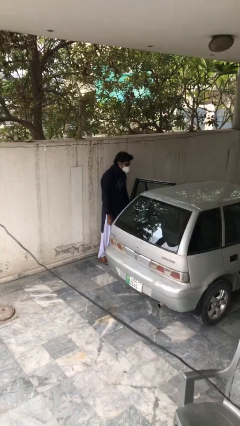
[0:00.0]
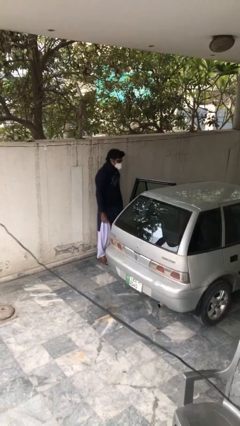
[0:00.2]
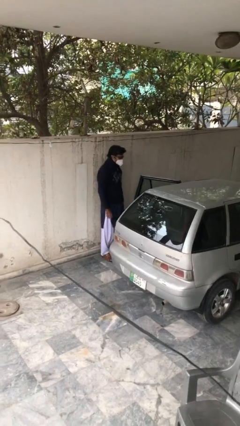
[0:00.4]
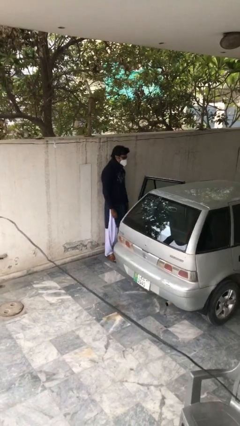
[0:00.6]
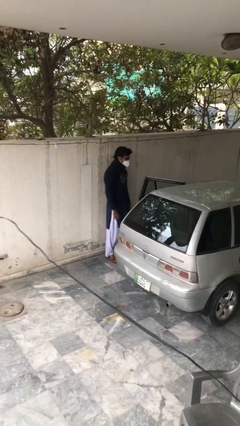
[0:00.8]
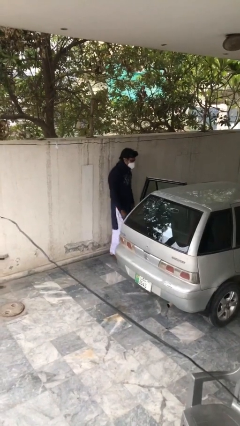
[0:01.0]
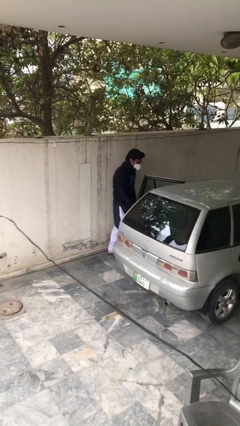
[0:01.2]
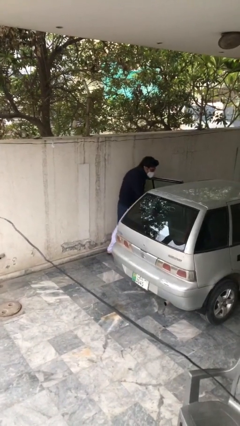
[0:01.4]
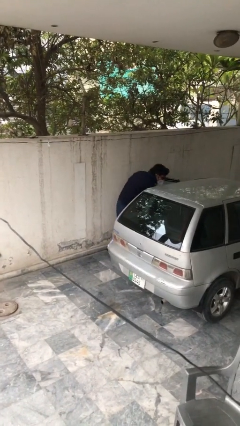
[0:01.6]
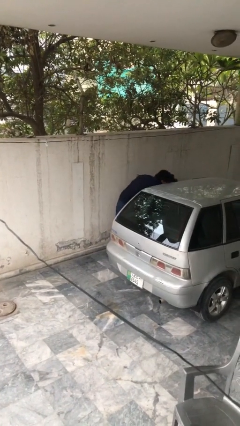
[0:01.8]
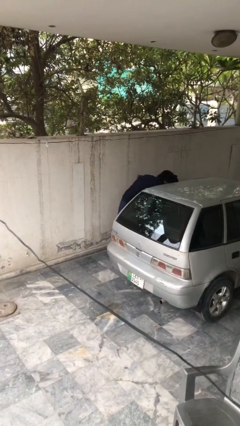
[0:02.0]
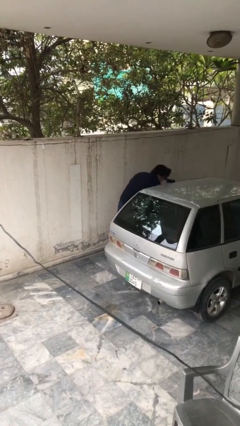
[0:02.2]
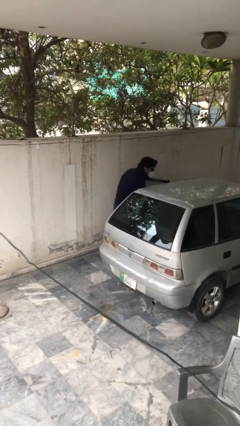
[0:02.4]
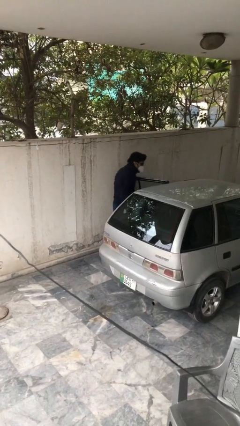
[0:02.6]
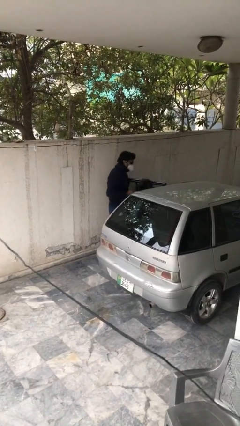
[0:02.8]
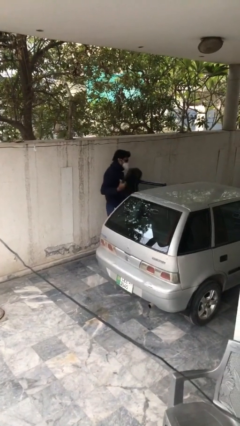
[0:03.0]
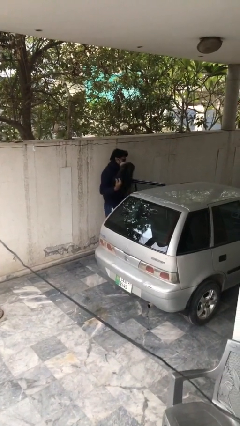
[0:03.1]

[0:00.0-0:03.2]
person unloads car

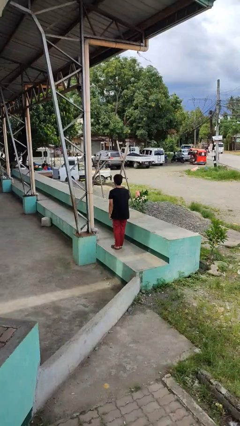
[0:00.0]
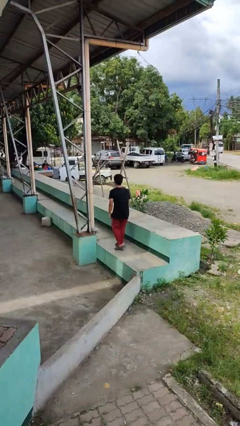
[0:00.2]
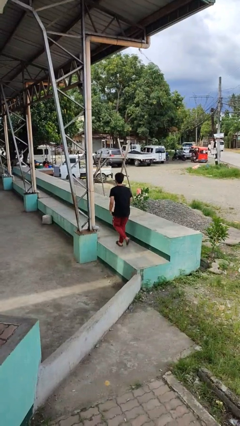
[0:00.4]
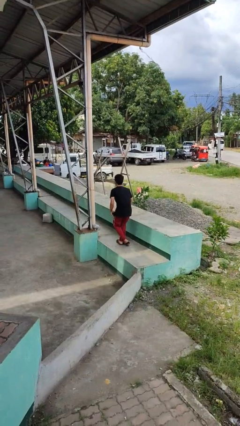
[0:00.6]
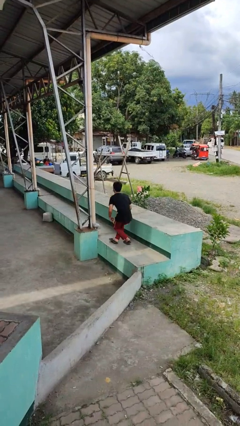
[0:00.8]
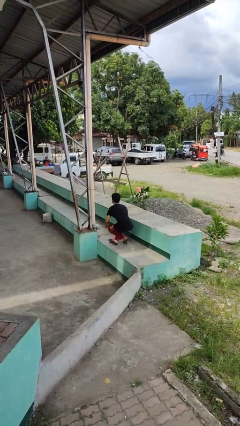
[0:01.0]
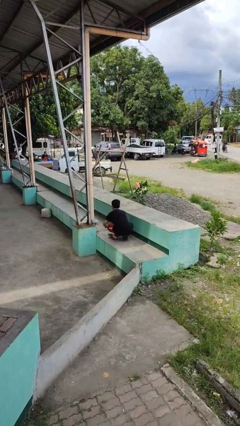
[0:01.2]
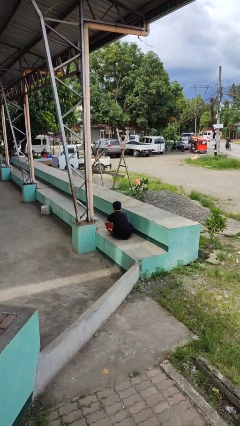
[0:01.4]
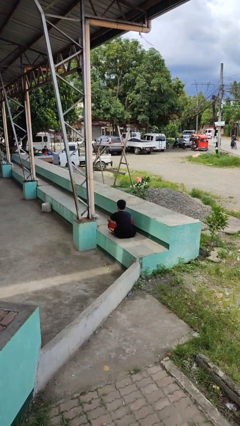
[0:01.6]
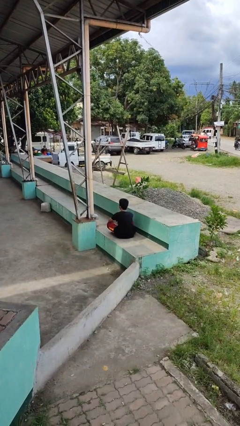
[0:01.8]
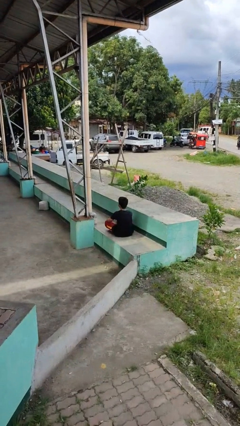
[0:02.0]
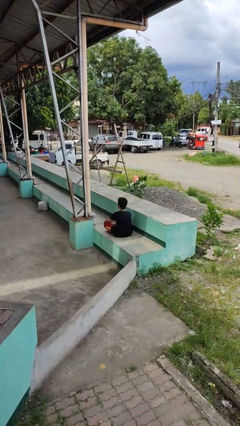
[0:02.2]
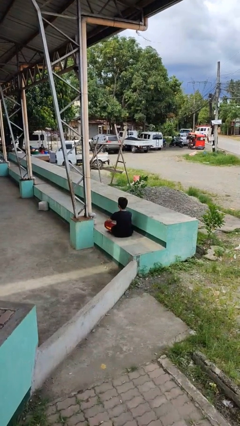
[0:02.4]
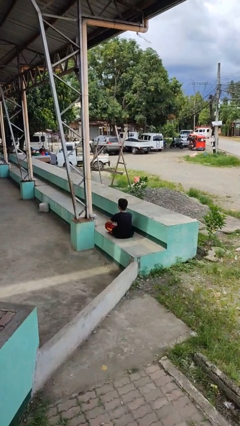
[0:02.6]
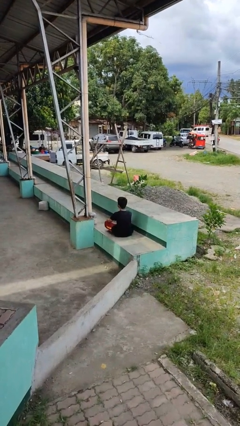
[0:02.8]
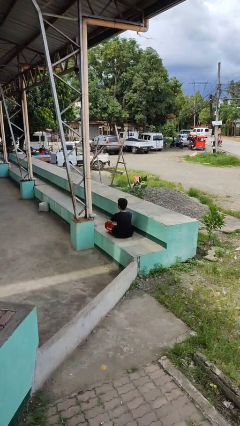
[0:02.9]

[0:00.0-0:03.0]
person sits crisscross

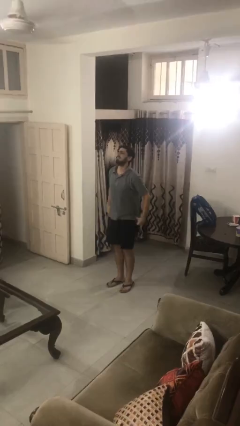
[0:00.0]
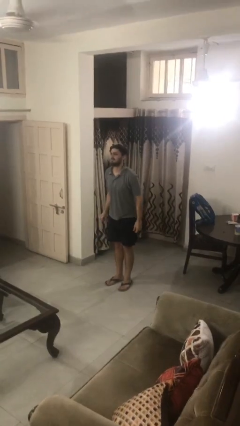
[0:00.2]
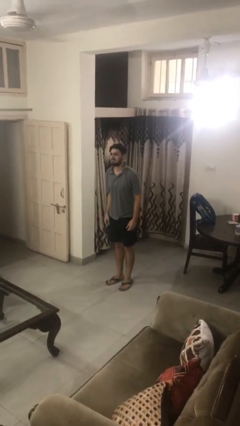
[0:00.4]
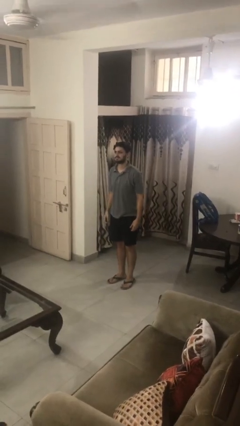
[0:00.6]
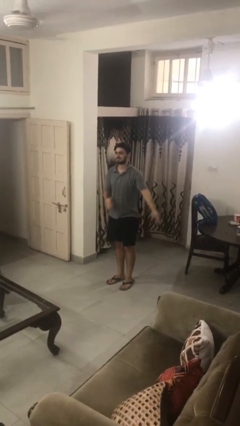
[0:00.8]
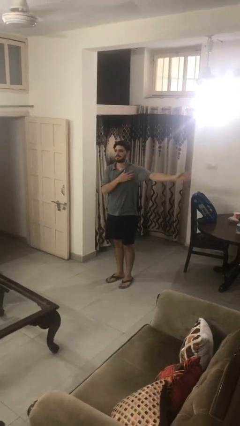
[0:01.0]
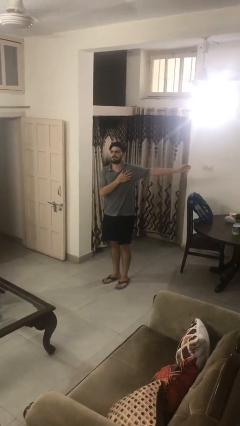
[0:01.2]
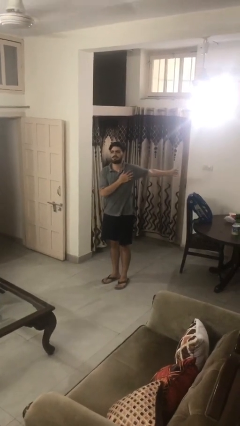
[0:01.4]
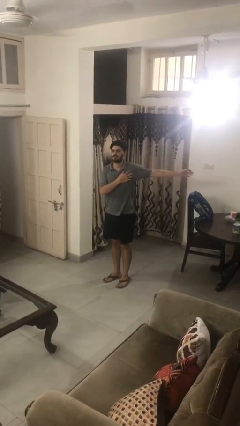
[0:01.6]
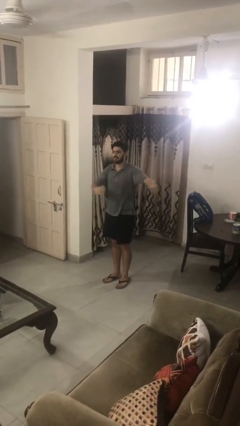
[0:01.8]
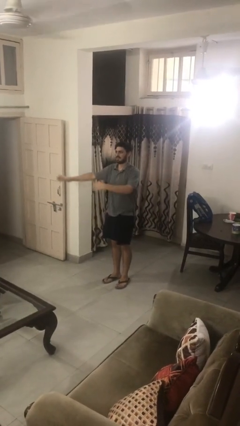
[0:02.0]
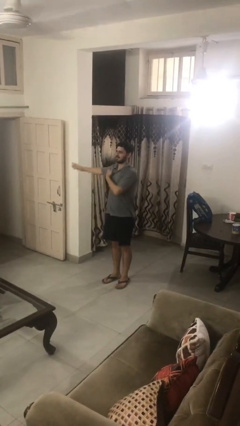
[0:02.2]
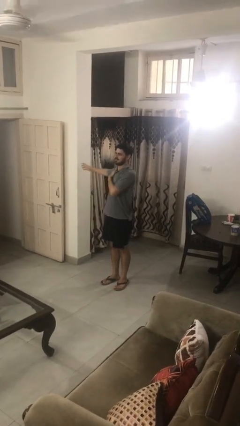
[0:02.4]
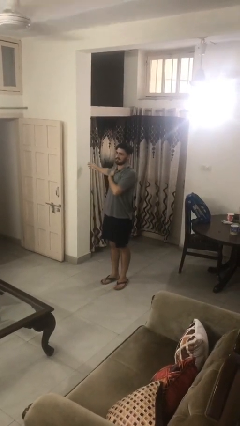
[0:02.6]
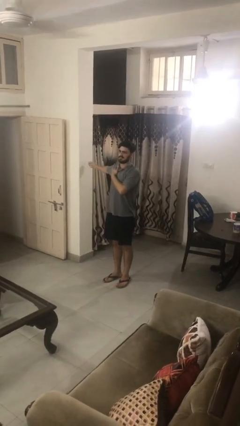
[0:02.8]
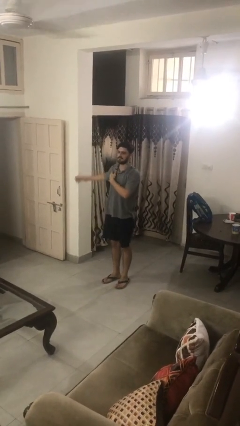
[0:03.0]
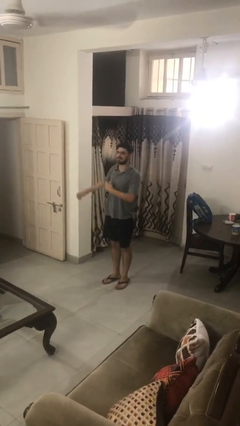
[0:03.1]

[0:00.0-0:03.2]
person stretches arms to side

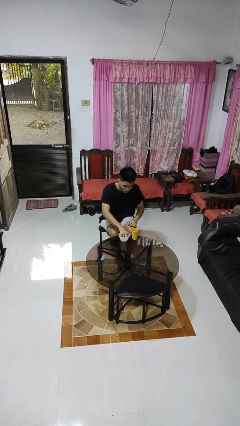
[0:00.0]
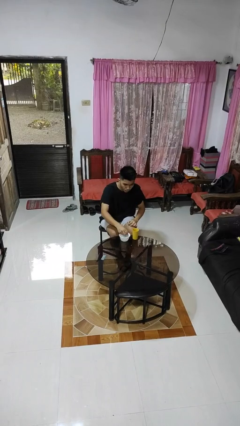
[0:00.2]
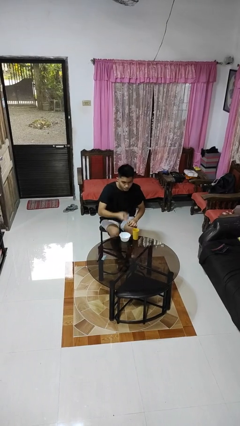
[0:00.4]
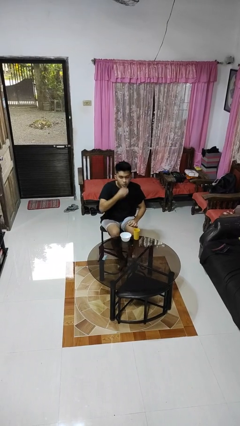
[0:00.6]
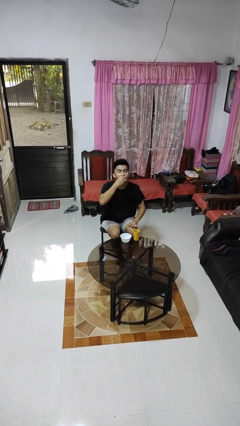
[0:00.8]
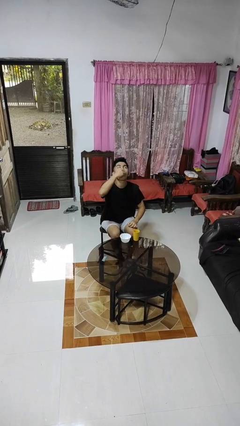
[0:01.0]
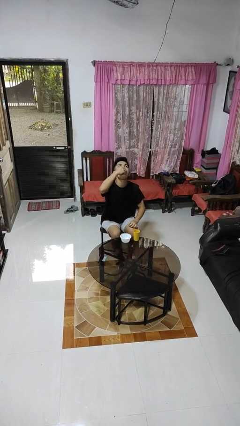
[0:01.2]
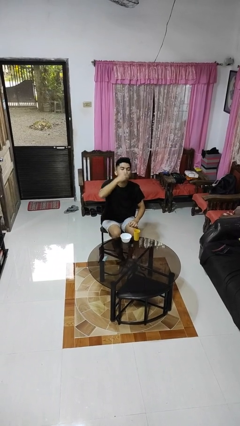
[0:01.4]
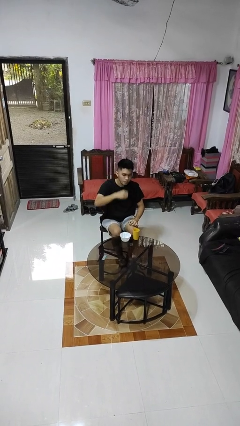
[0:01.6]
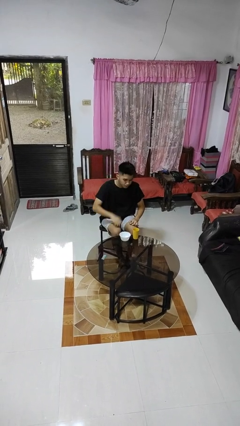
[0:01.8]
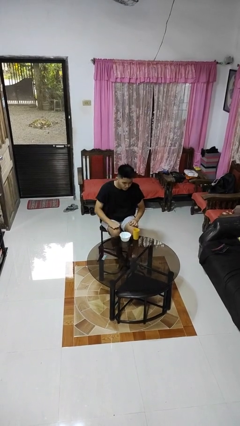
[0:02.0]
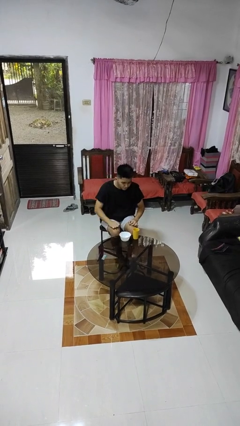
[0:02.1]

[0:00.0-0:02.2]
person takes medicine pills

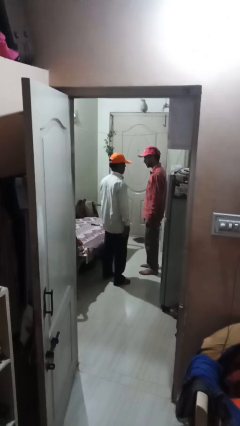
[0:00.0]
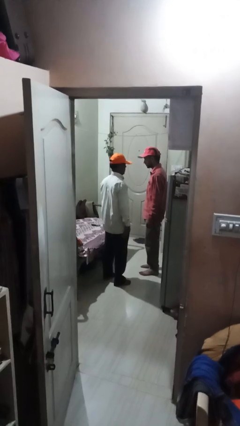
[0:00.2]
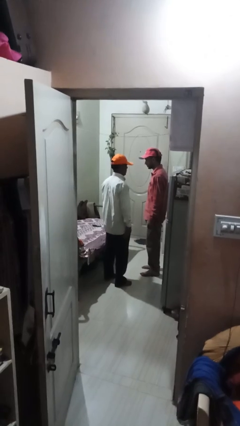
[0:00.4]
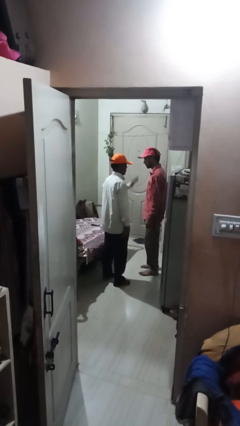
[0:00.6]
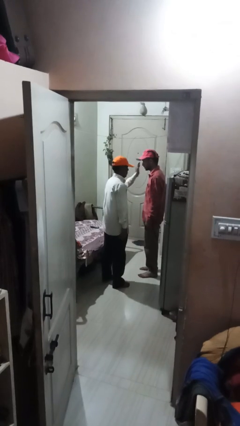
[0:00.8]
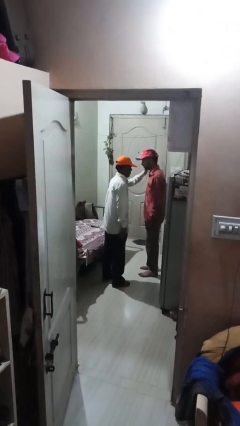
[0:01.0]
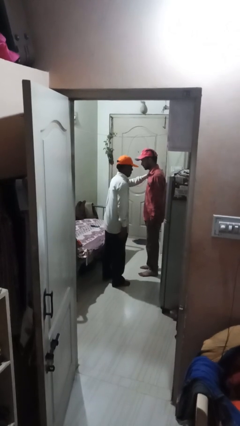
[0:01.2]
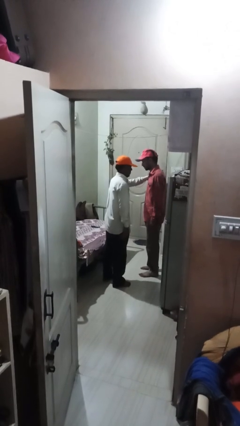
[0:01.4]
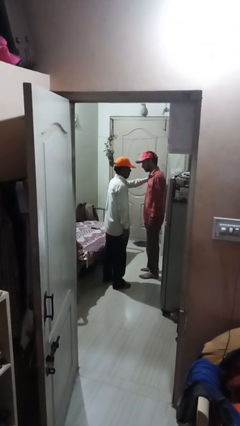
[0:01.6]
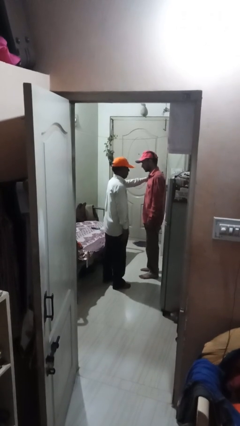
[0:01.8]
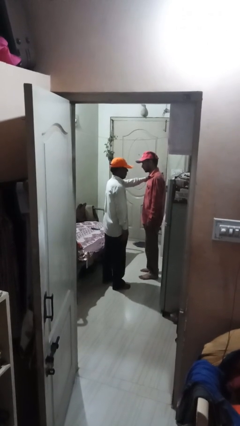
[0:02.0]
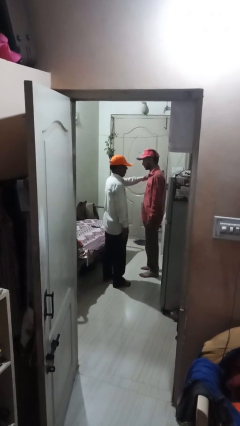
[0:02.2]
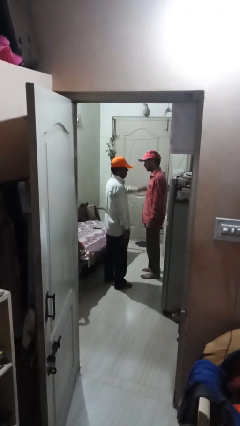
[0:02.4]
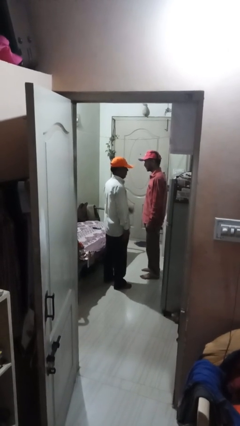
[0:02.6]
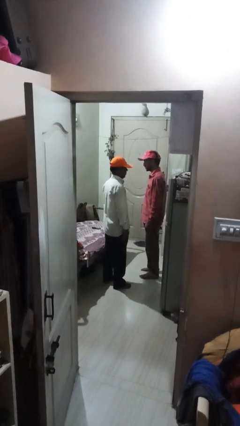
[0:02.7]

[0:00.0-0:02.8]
person pounds shoulders of person

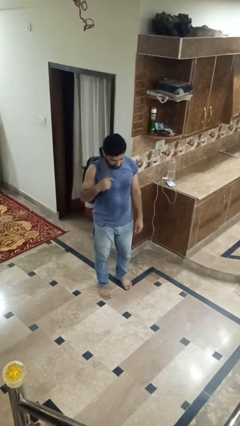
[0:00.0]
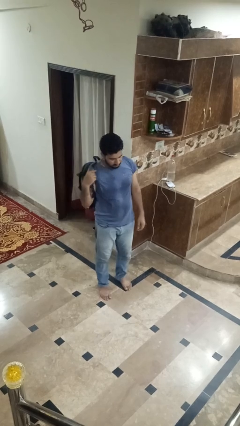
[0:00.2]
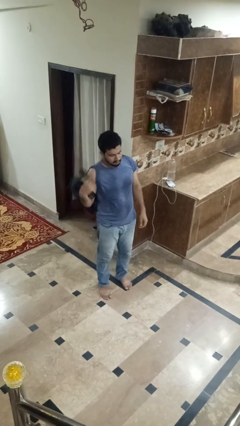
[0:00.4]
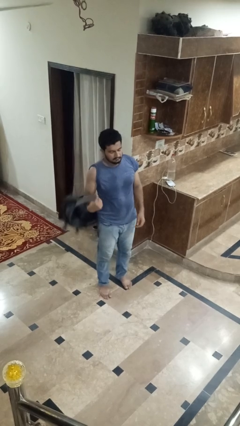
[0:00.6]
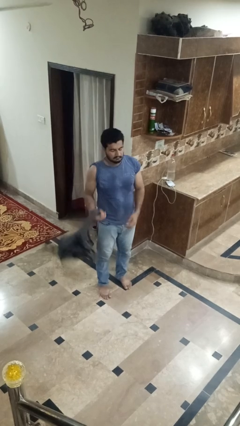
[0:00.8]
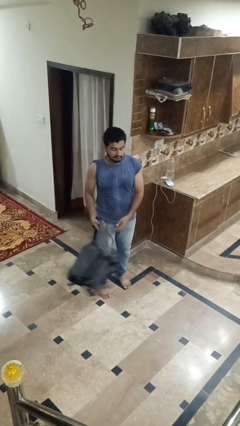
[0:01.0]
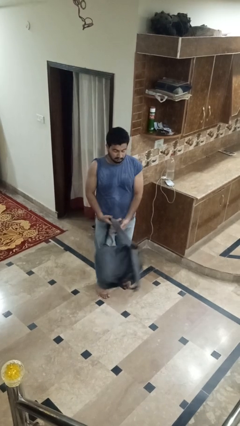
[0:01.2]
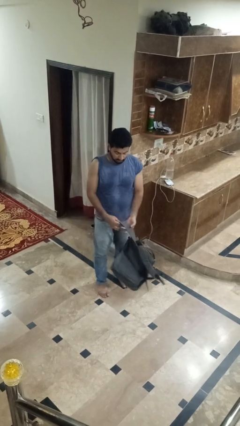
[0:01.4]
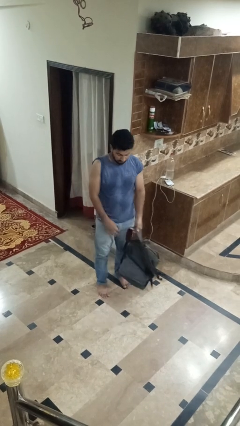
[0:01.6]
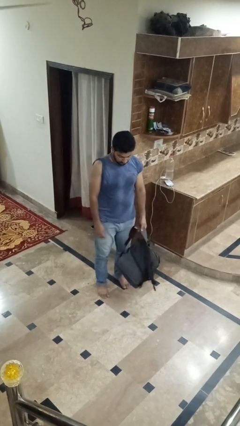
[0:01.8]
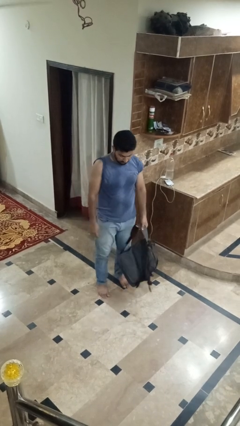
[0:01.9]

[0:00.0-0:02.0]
person takes off backpack

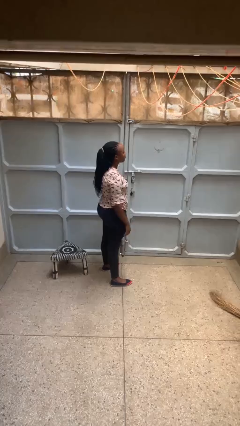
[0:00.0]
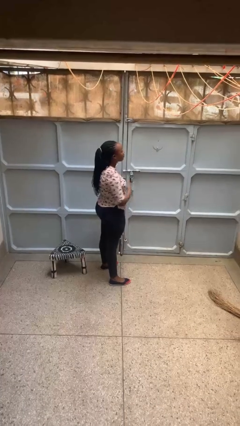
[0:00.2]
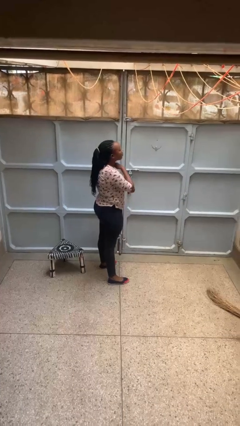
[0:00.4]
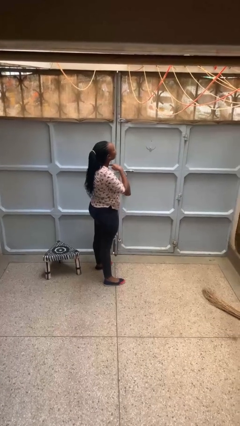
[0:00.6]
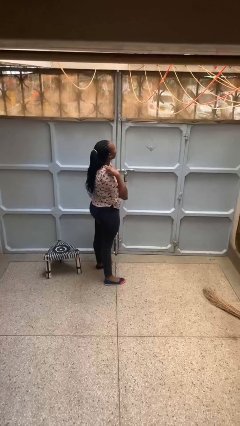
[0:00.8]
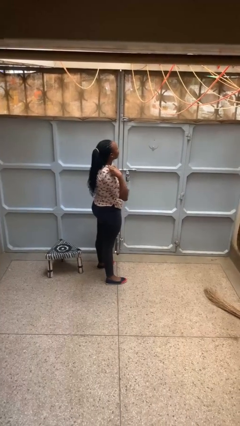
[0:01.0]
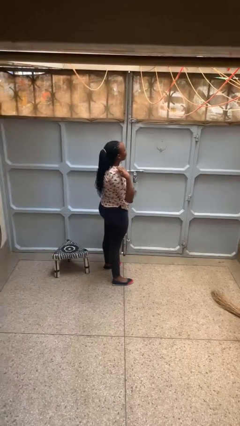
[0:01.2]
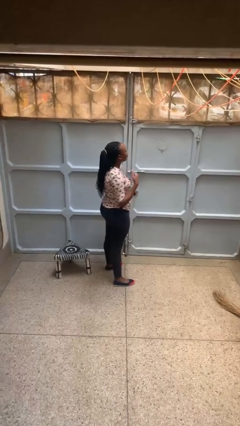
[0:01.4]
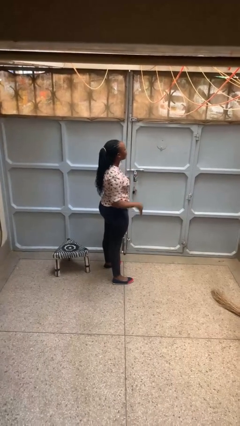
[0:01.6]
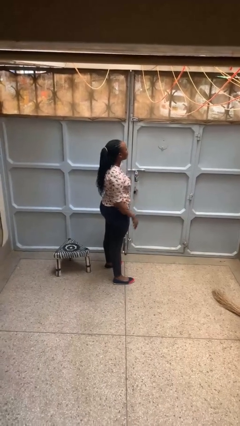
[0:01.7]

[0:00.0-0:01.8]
person gestures cut
